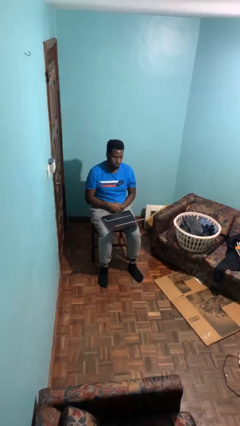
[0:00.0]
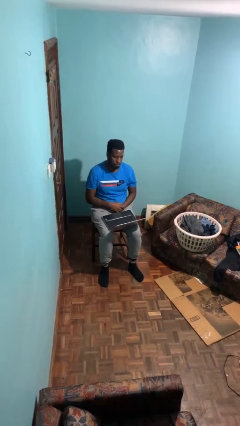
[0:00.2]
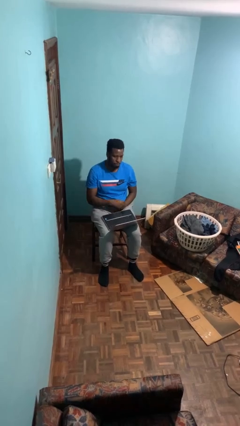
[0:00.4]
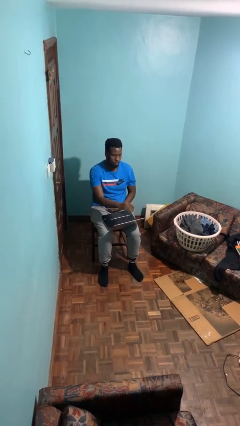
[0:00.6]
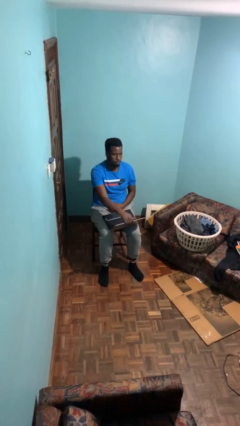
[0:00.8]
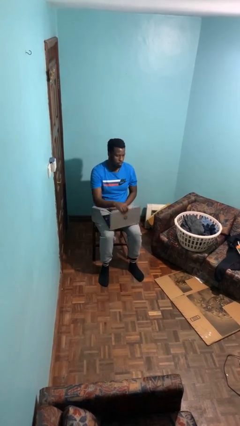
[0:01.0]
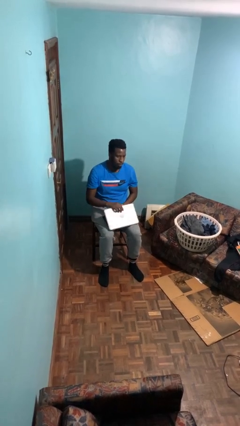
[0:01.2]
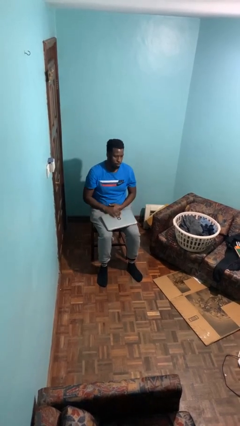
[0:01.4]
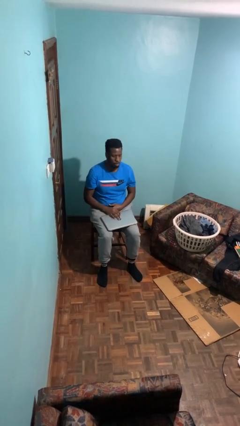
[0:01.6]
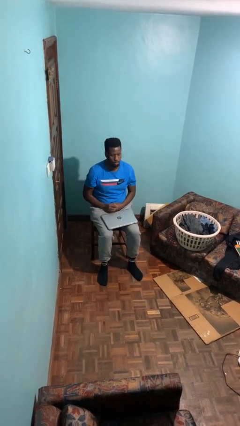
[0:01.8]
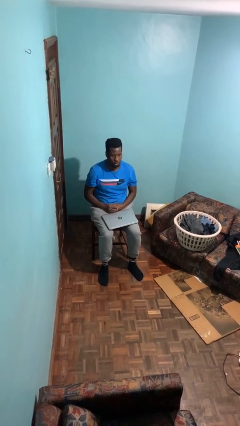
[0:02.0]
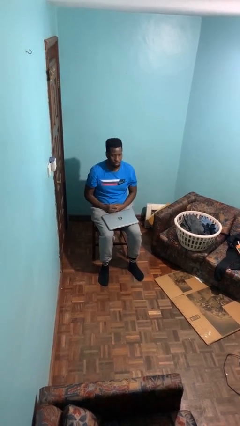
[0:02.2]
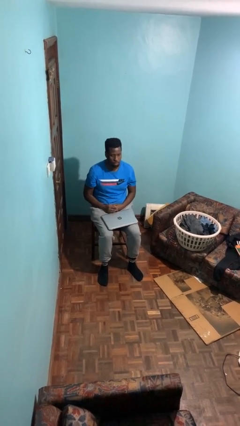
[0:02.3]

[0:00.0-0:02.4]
person closes laptop

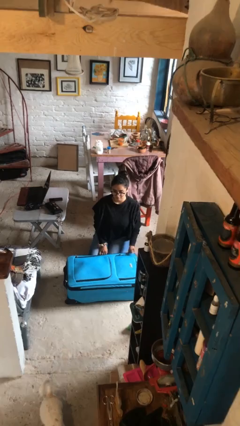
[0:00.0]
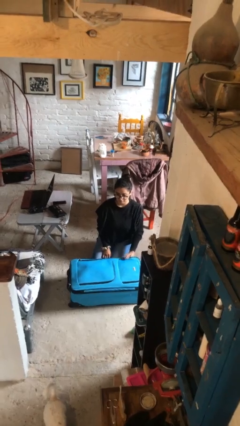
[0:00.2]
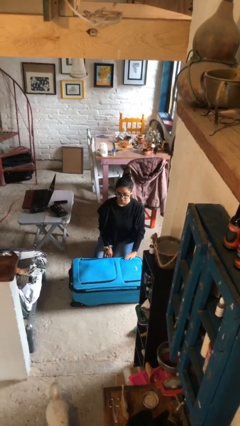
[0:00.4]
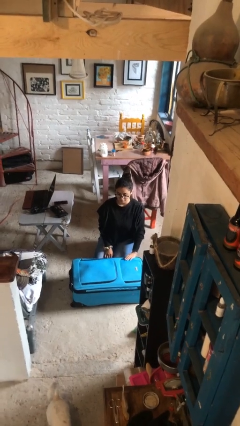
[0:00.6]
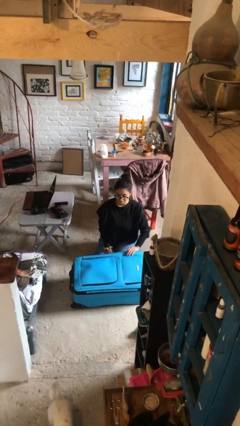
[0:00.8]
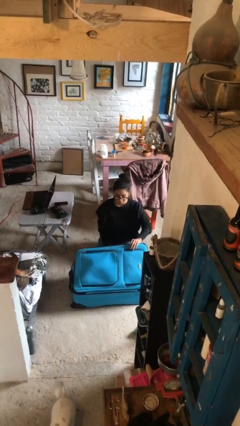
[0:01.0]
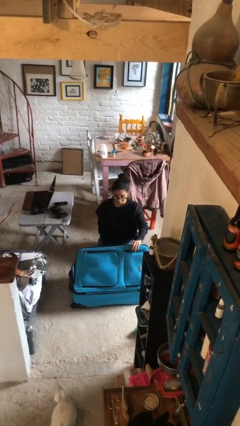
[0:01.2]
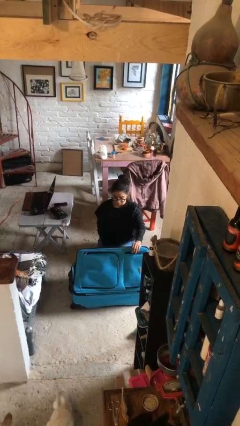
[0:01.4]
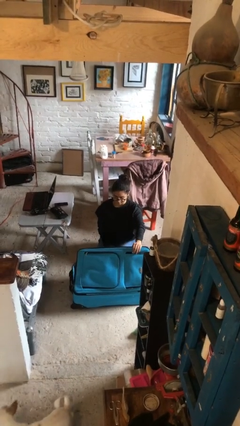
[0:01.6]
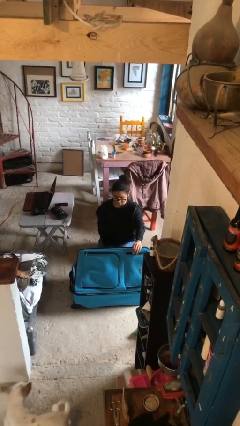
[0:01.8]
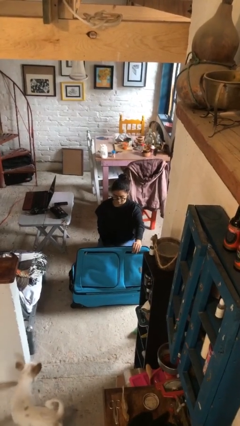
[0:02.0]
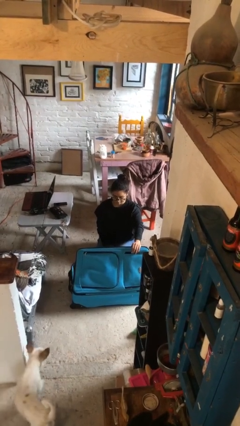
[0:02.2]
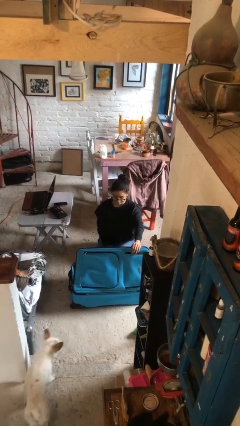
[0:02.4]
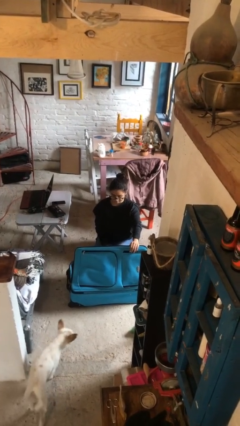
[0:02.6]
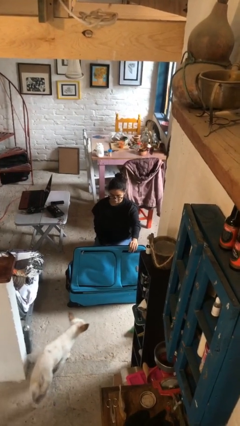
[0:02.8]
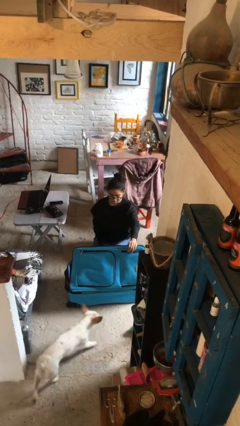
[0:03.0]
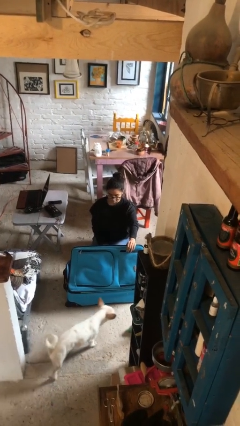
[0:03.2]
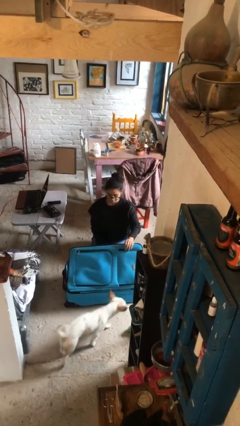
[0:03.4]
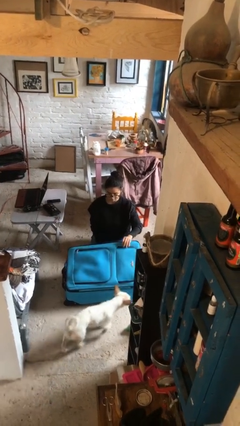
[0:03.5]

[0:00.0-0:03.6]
person opens suitcase

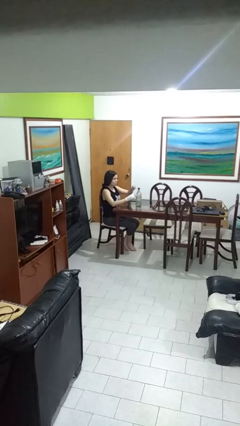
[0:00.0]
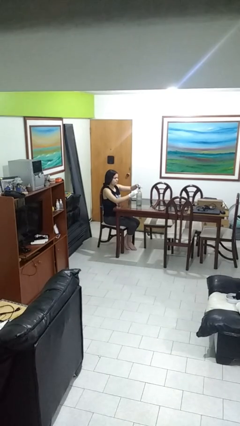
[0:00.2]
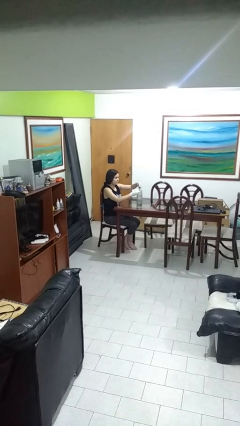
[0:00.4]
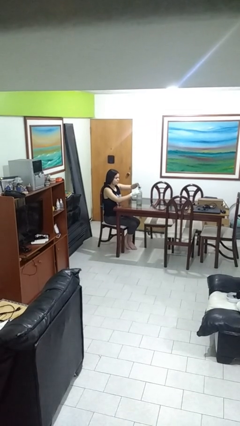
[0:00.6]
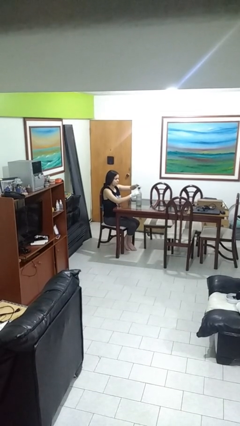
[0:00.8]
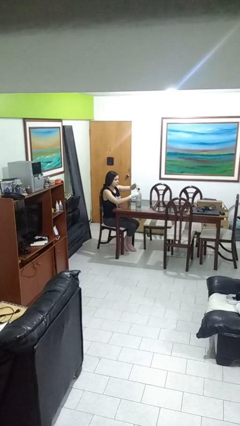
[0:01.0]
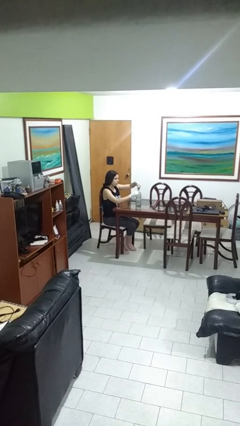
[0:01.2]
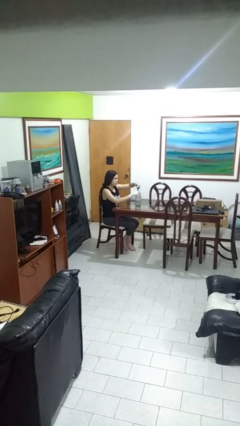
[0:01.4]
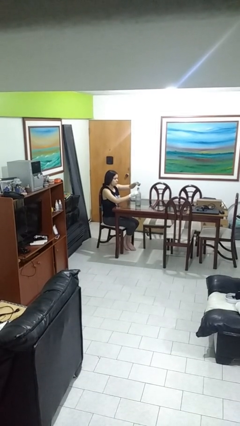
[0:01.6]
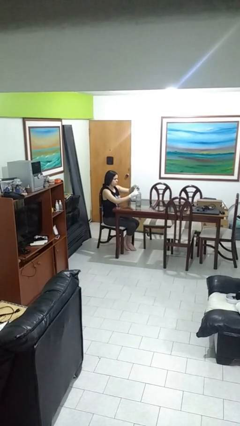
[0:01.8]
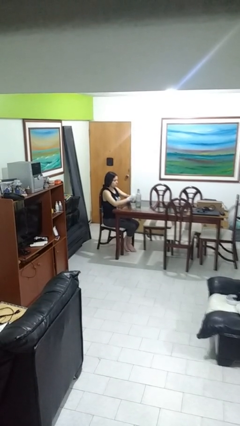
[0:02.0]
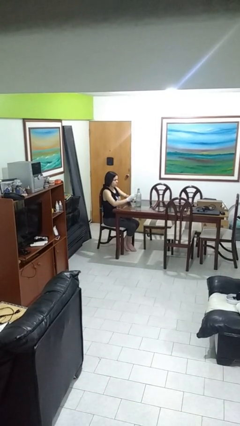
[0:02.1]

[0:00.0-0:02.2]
person unscrews lid from bottle

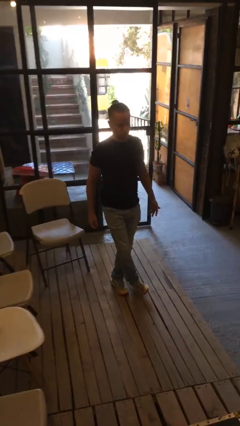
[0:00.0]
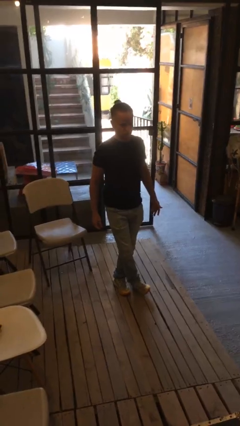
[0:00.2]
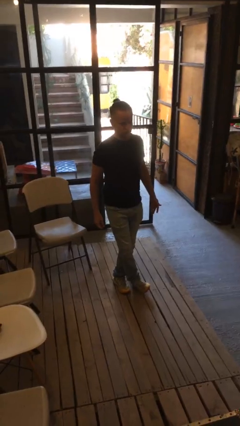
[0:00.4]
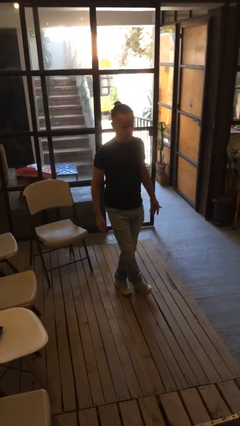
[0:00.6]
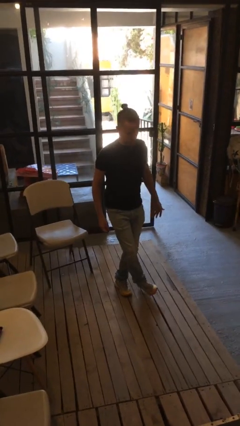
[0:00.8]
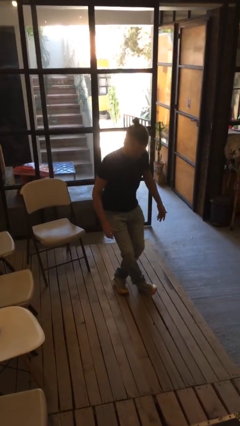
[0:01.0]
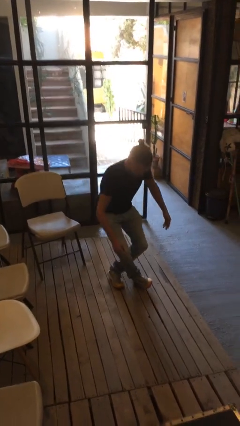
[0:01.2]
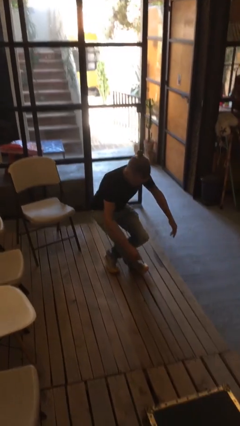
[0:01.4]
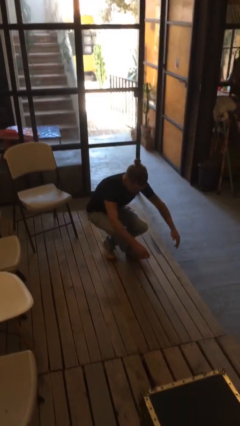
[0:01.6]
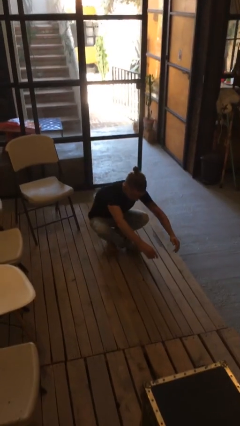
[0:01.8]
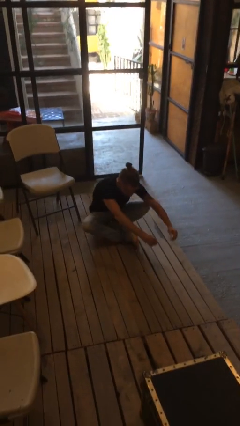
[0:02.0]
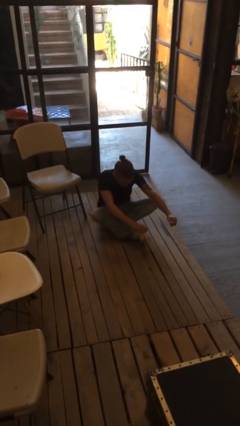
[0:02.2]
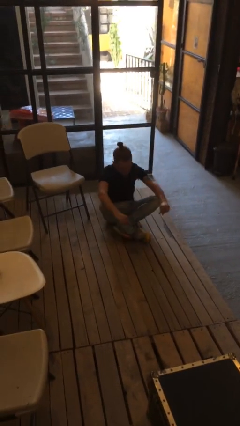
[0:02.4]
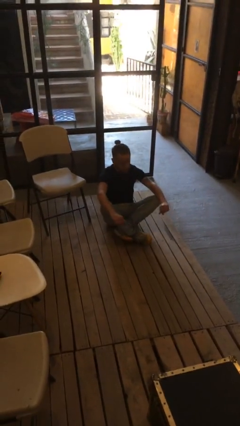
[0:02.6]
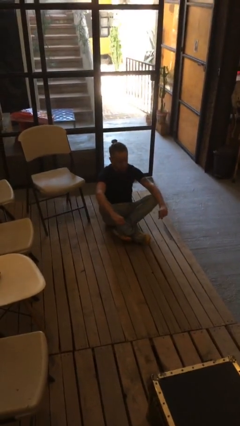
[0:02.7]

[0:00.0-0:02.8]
person sits crisscross

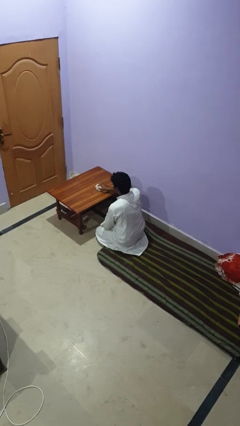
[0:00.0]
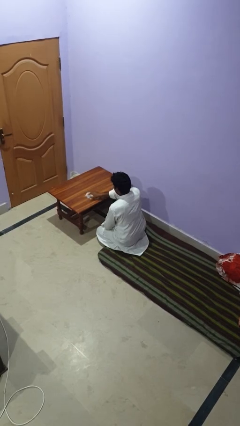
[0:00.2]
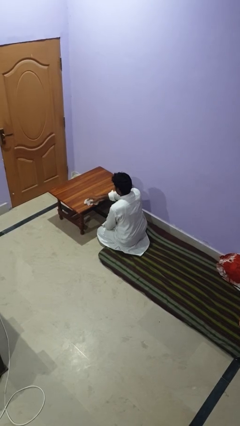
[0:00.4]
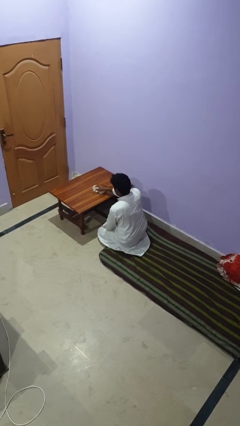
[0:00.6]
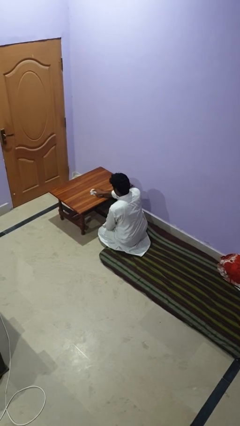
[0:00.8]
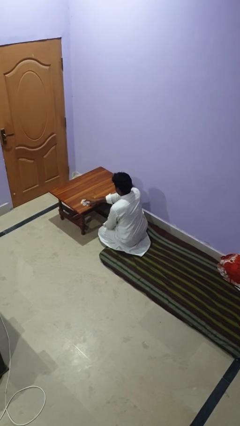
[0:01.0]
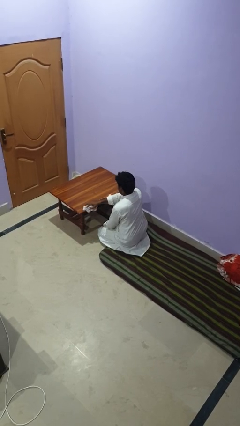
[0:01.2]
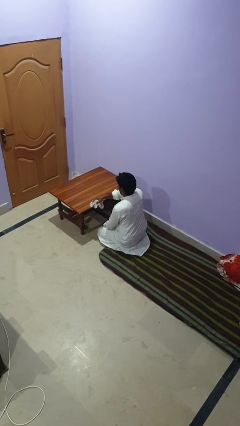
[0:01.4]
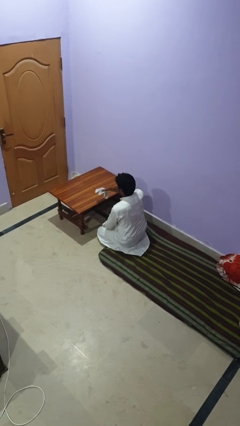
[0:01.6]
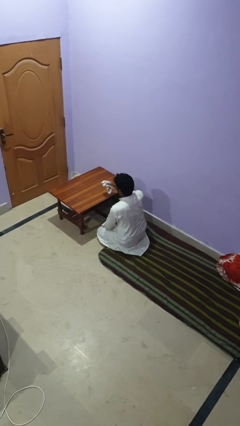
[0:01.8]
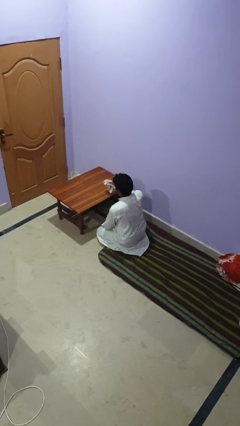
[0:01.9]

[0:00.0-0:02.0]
person cleans table with rag

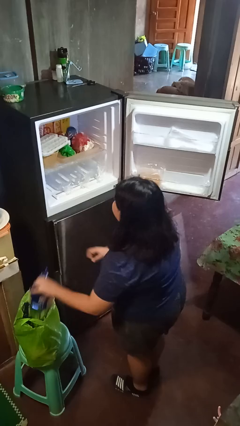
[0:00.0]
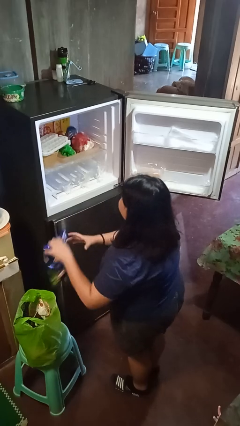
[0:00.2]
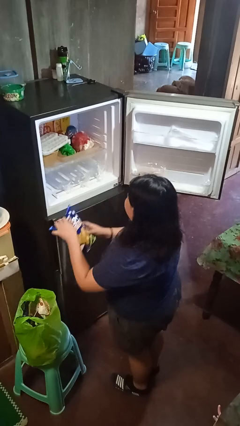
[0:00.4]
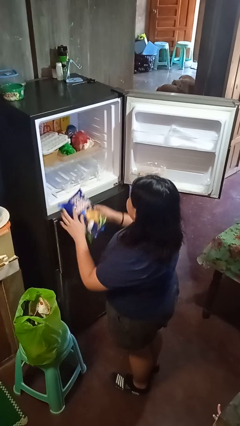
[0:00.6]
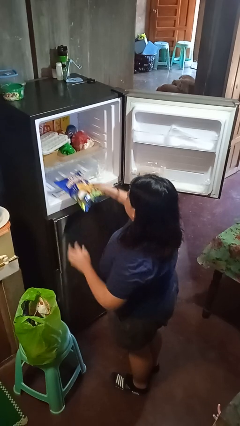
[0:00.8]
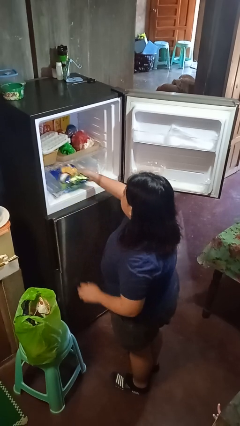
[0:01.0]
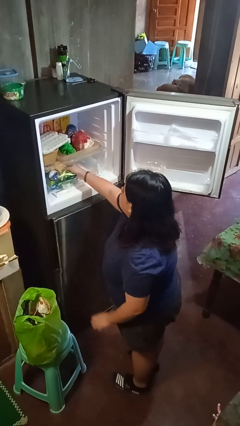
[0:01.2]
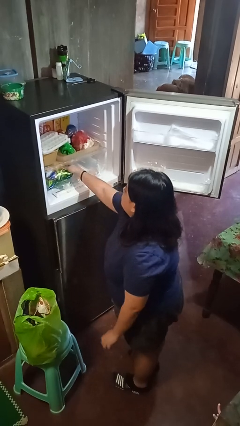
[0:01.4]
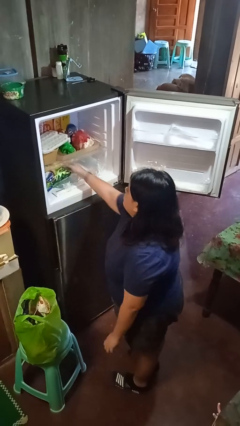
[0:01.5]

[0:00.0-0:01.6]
person loads groceries into refrigerator

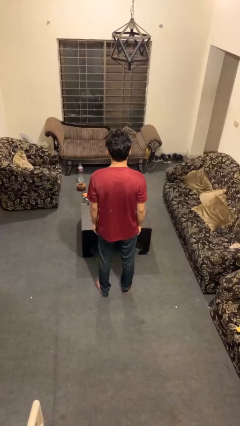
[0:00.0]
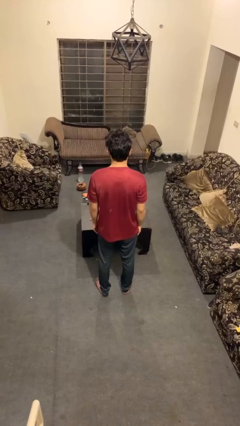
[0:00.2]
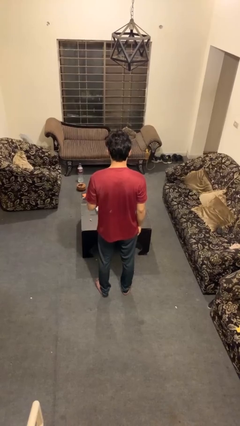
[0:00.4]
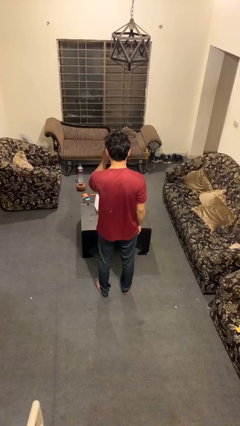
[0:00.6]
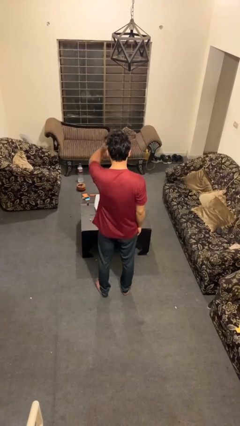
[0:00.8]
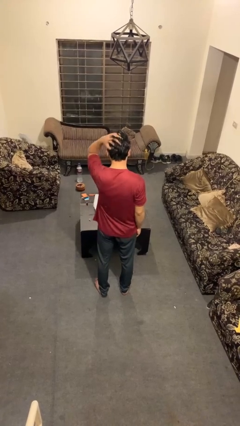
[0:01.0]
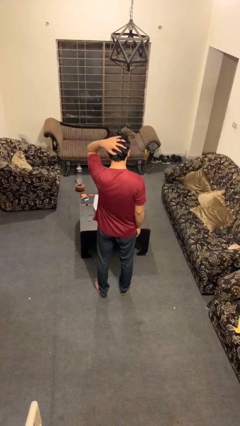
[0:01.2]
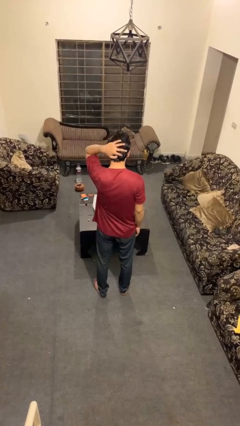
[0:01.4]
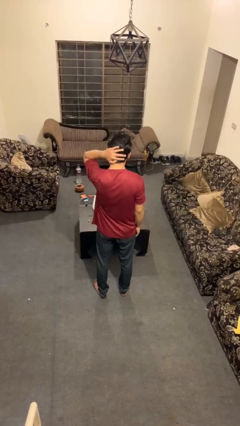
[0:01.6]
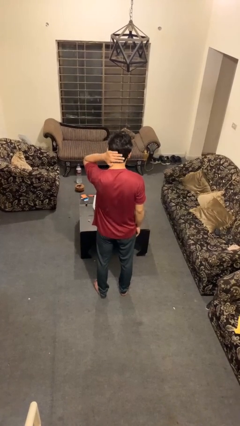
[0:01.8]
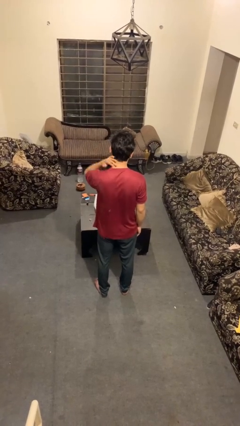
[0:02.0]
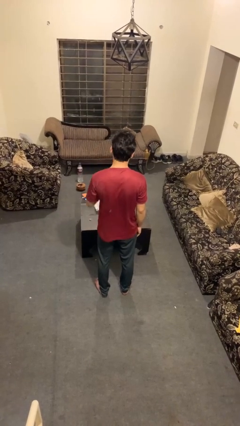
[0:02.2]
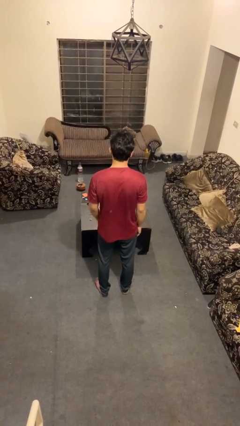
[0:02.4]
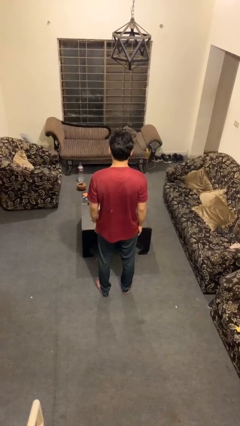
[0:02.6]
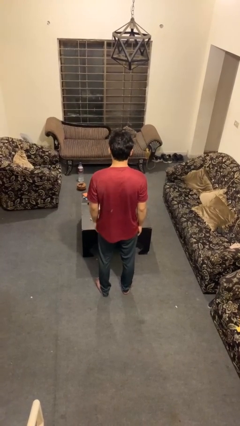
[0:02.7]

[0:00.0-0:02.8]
person strokes hair
